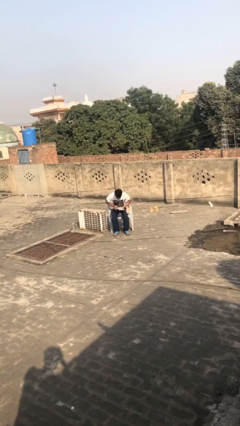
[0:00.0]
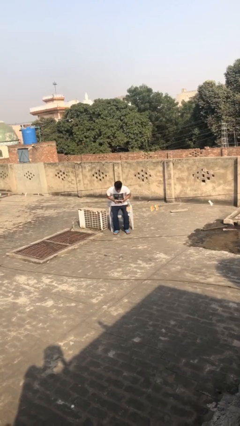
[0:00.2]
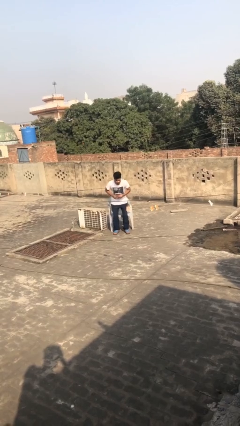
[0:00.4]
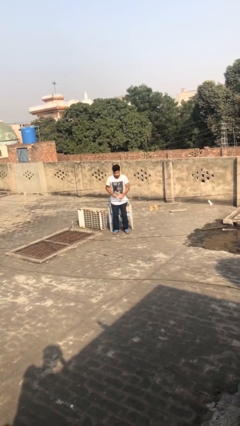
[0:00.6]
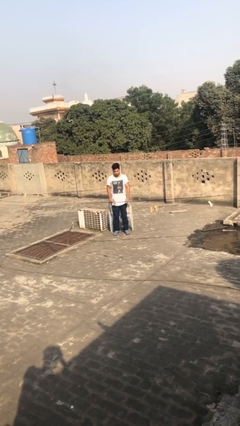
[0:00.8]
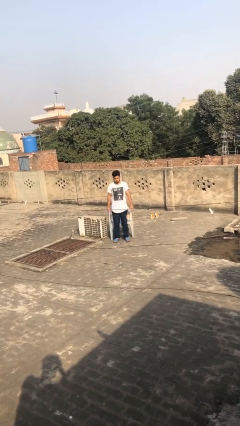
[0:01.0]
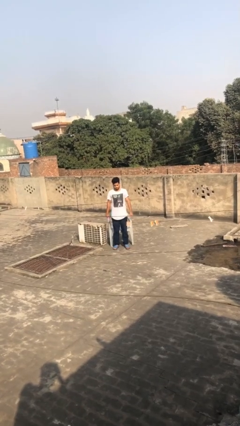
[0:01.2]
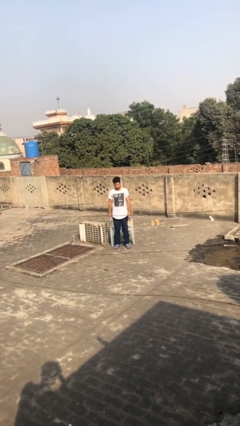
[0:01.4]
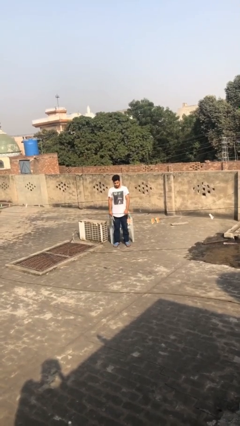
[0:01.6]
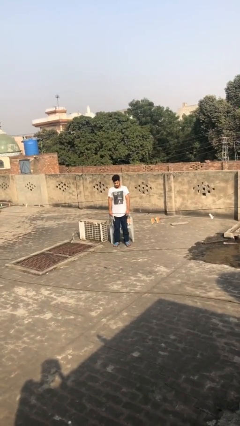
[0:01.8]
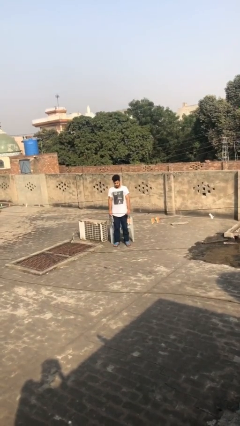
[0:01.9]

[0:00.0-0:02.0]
person stands up

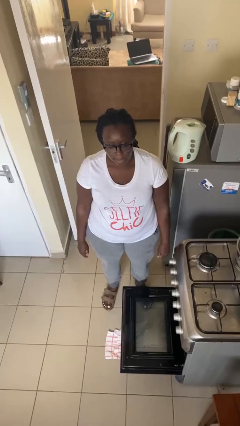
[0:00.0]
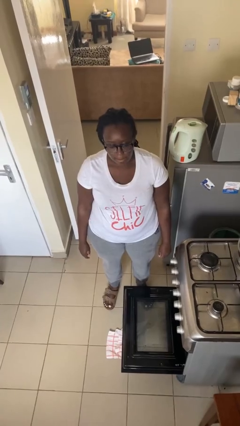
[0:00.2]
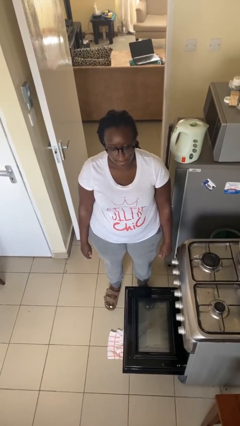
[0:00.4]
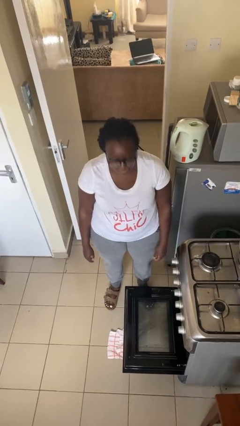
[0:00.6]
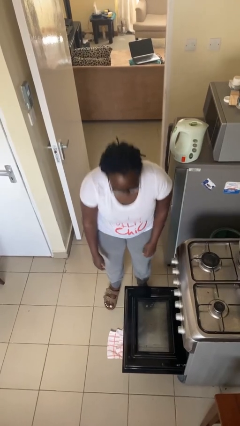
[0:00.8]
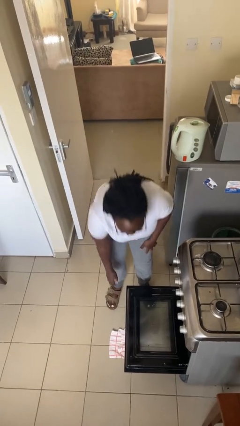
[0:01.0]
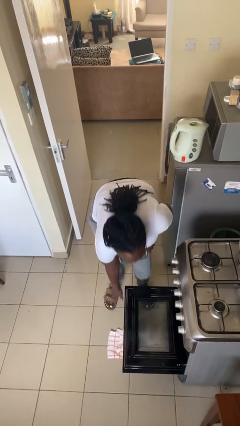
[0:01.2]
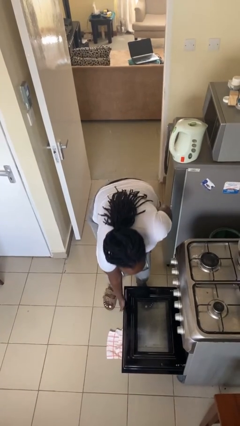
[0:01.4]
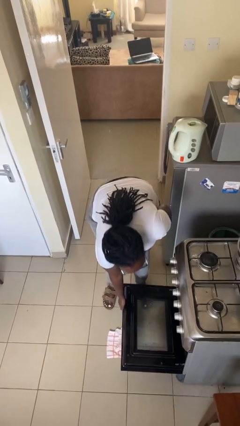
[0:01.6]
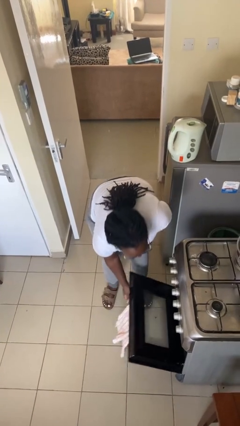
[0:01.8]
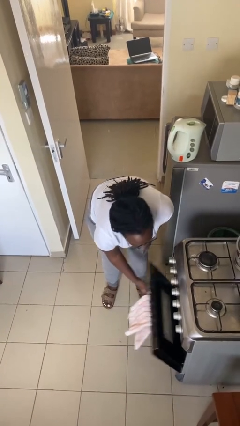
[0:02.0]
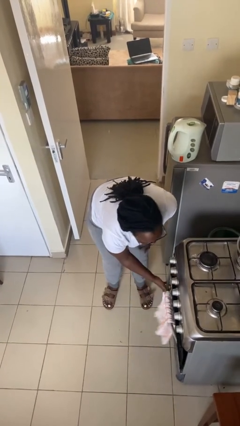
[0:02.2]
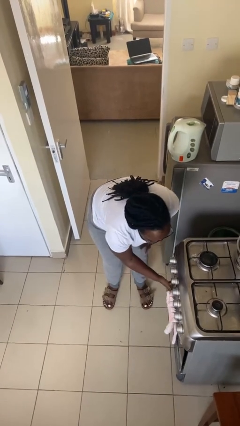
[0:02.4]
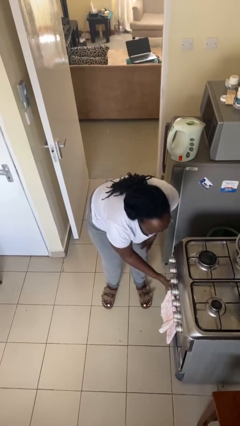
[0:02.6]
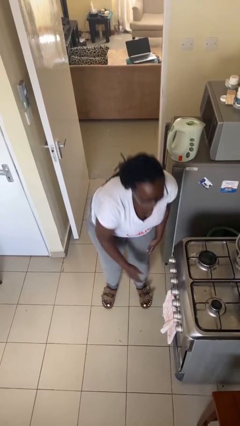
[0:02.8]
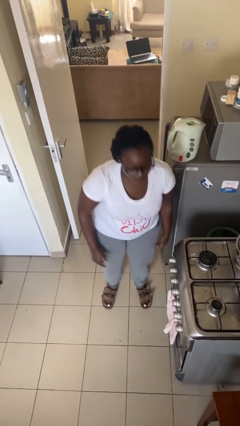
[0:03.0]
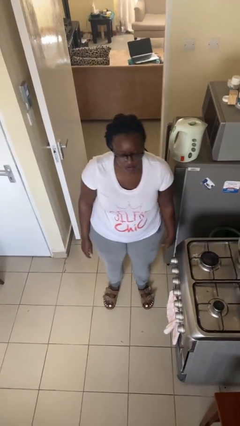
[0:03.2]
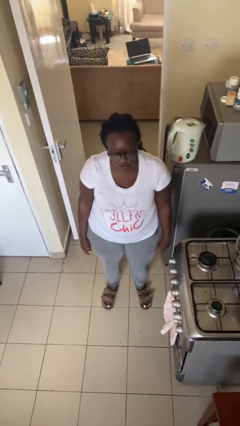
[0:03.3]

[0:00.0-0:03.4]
person closes oven door

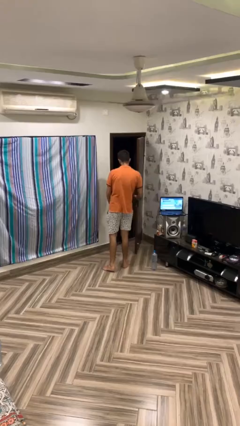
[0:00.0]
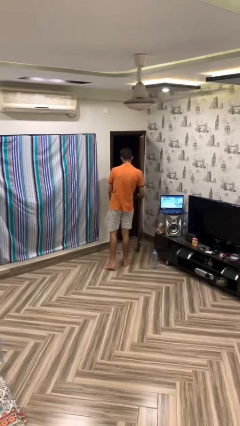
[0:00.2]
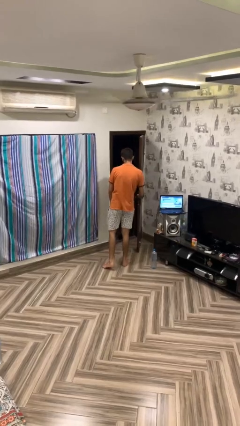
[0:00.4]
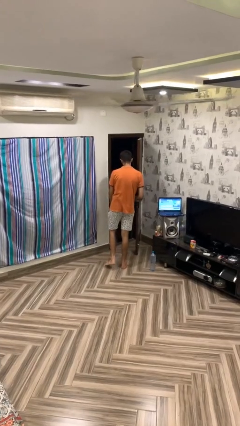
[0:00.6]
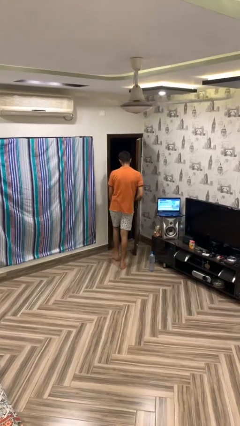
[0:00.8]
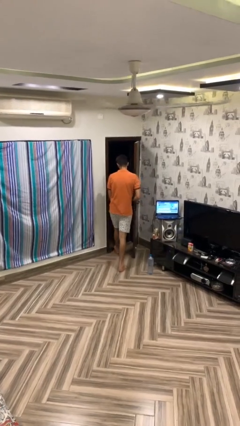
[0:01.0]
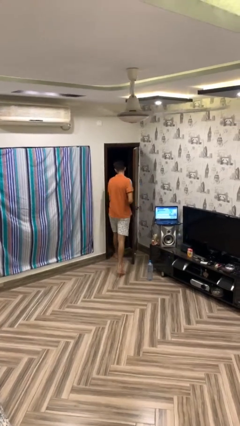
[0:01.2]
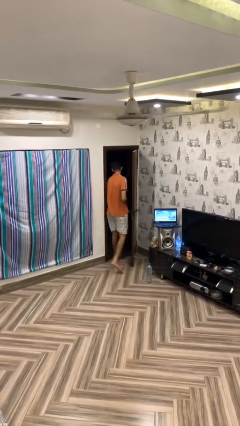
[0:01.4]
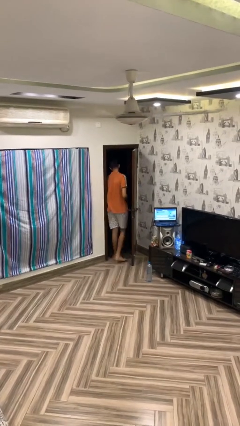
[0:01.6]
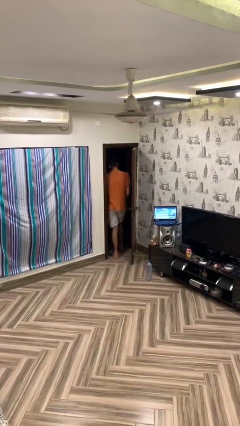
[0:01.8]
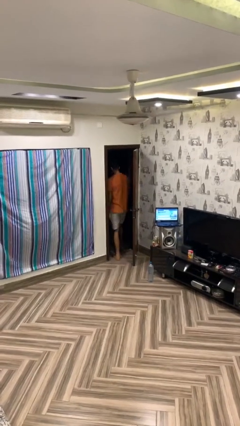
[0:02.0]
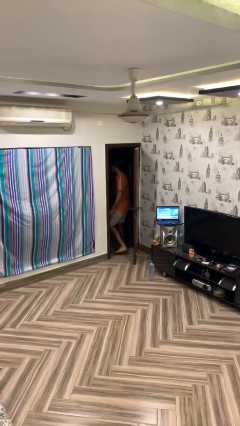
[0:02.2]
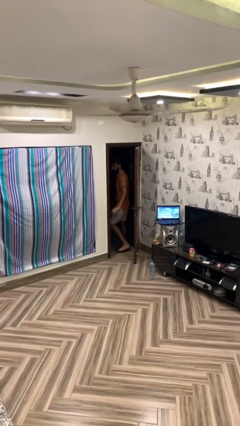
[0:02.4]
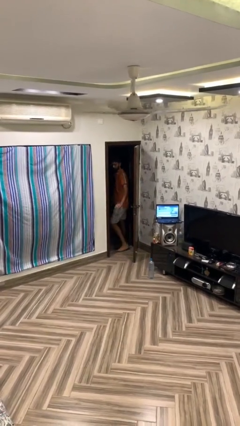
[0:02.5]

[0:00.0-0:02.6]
person exits scene through structure

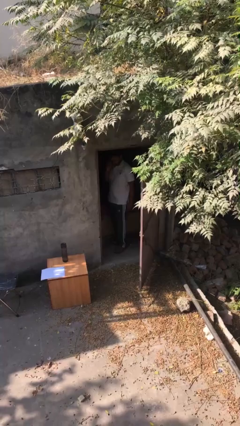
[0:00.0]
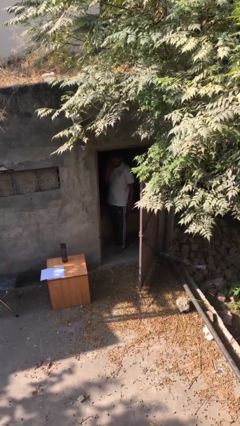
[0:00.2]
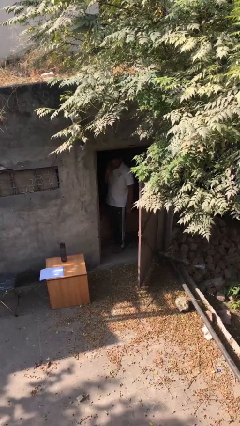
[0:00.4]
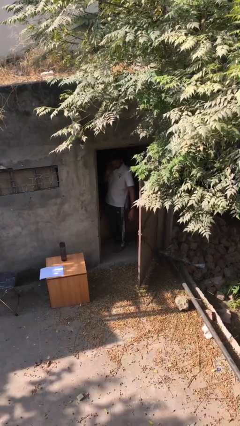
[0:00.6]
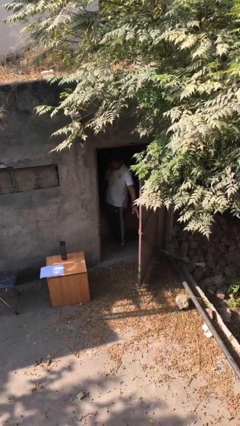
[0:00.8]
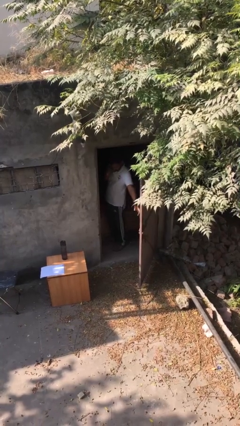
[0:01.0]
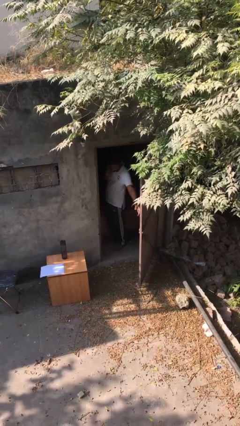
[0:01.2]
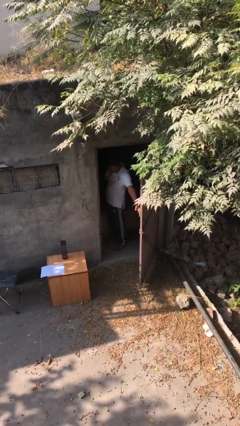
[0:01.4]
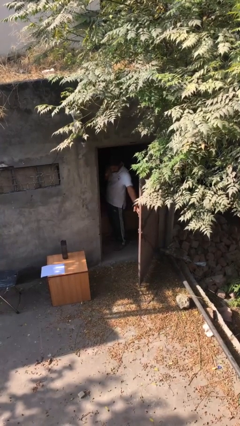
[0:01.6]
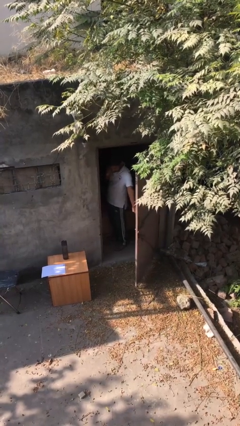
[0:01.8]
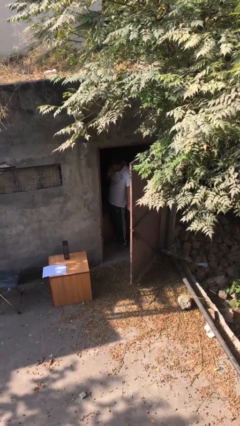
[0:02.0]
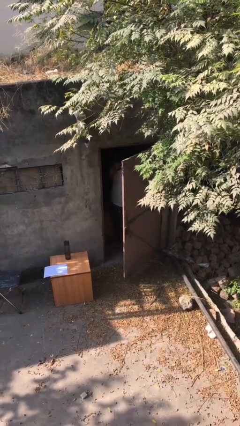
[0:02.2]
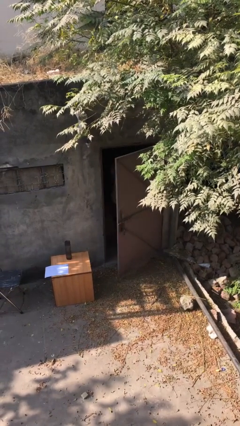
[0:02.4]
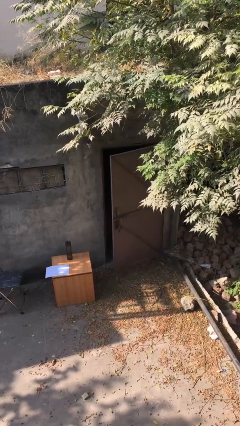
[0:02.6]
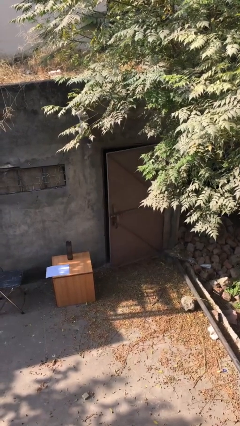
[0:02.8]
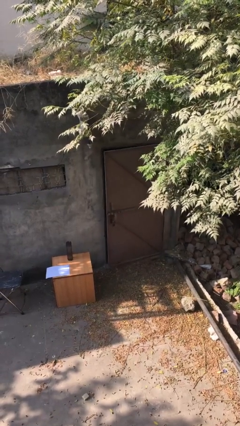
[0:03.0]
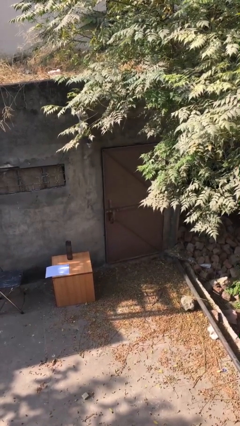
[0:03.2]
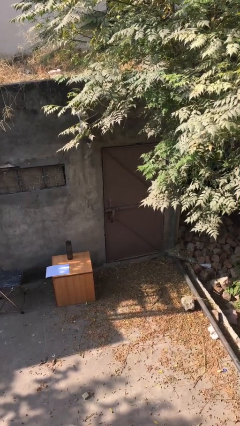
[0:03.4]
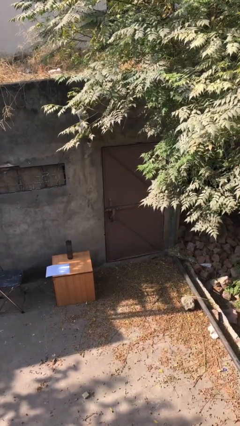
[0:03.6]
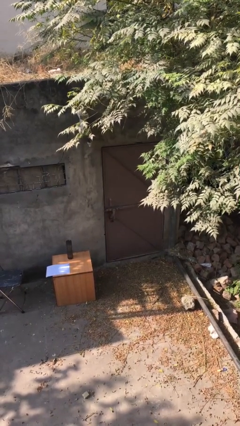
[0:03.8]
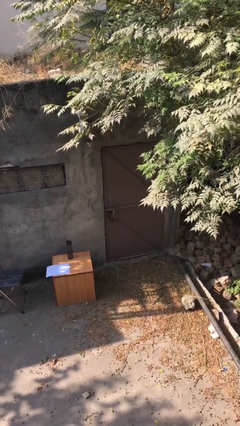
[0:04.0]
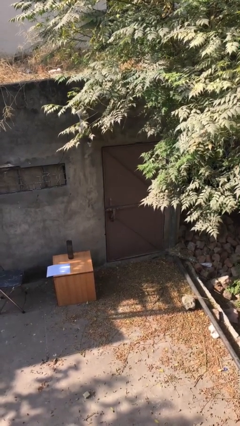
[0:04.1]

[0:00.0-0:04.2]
person closes facility door

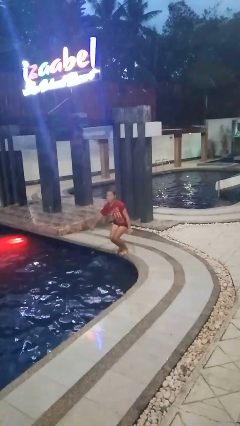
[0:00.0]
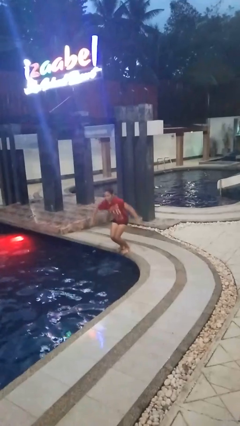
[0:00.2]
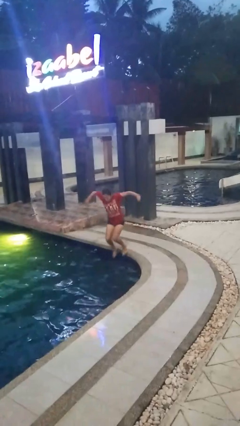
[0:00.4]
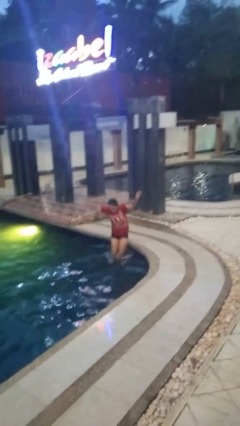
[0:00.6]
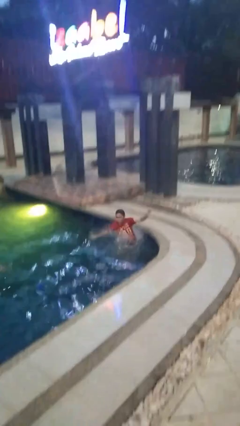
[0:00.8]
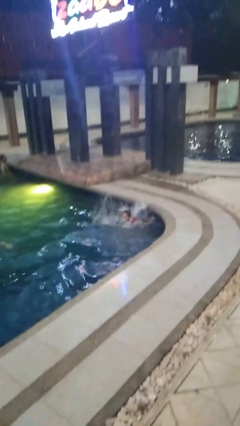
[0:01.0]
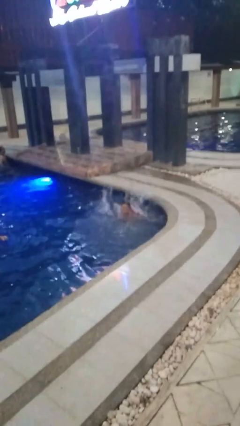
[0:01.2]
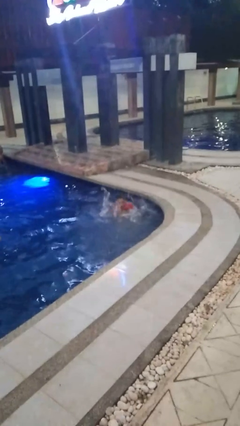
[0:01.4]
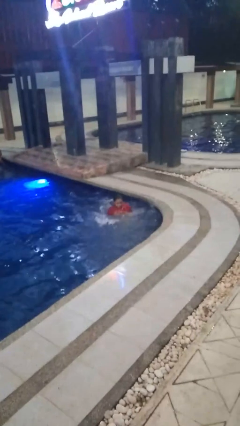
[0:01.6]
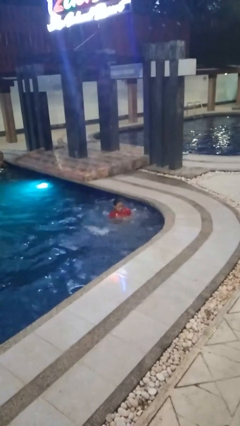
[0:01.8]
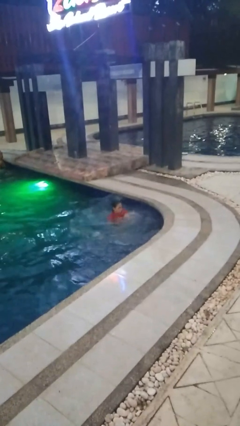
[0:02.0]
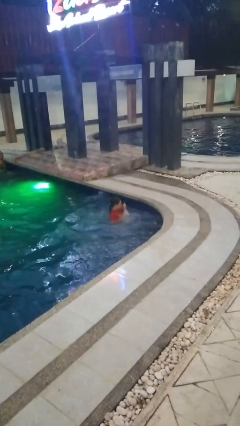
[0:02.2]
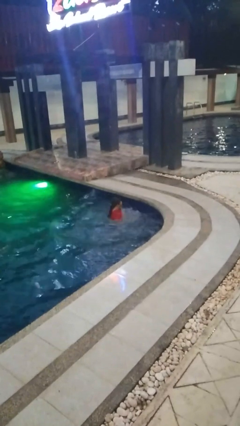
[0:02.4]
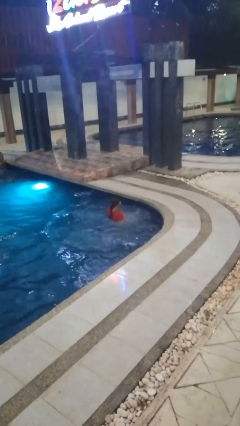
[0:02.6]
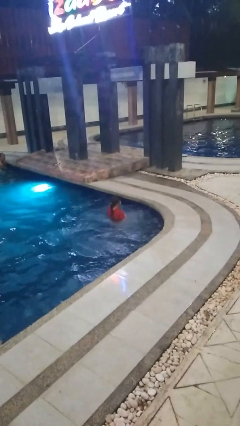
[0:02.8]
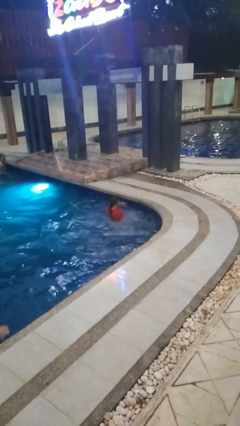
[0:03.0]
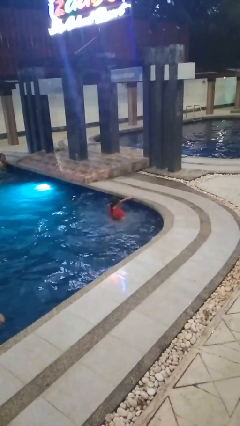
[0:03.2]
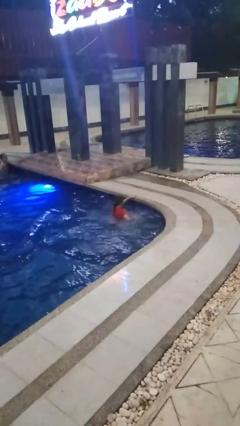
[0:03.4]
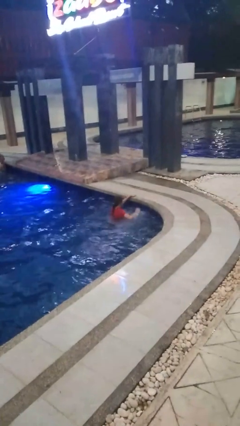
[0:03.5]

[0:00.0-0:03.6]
person jumps into pool

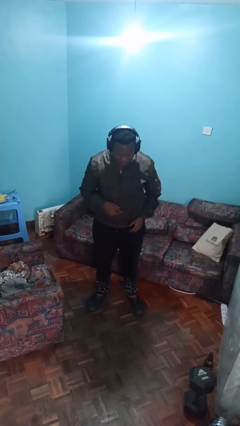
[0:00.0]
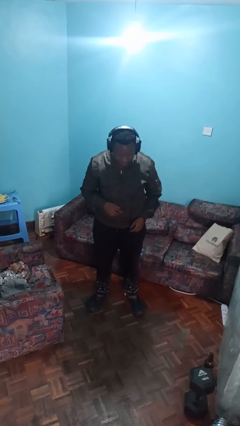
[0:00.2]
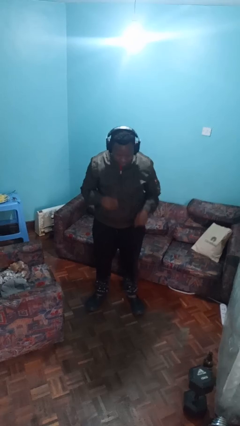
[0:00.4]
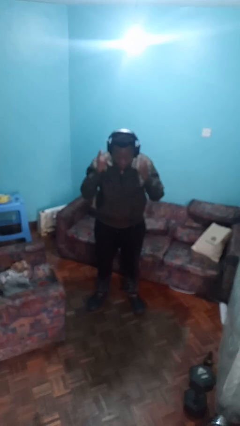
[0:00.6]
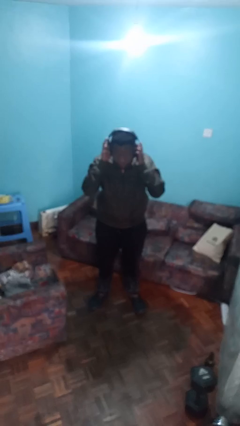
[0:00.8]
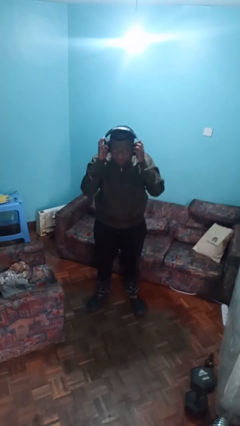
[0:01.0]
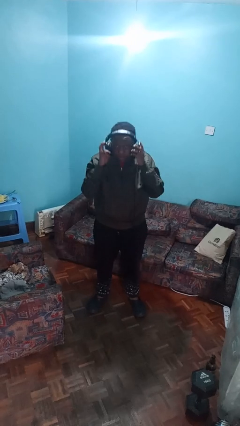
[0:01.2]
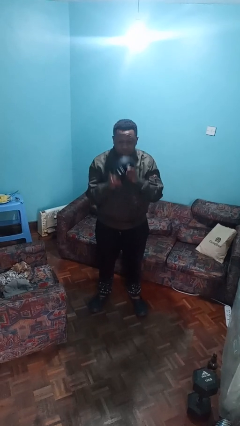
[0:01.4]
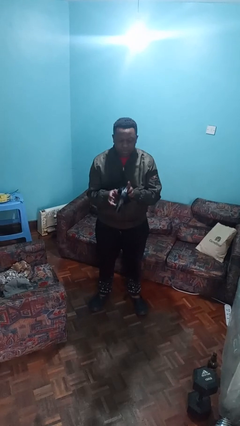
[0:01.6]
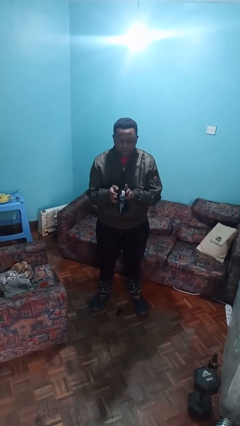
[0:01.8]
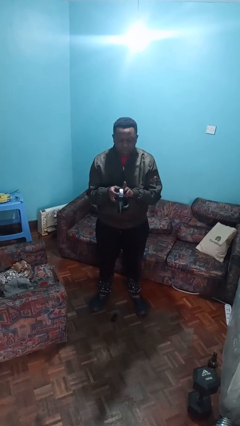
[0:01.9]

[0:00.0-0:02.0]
person takes off headphones
